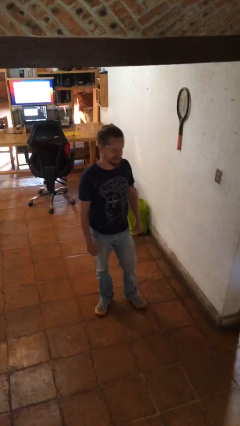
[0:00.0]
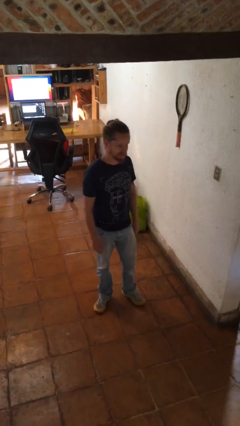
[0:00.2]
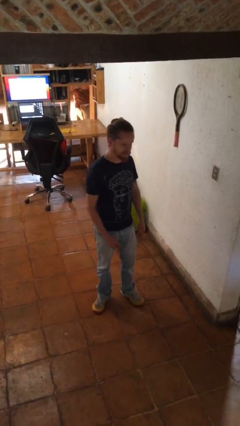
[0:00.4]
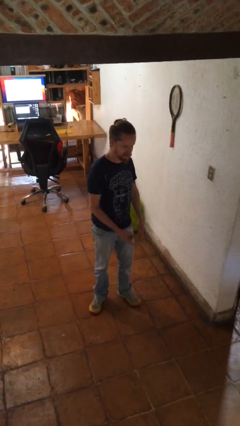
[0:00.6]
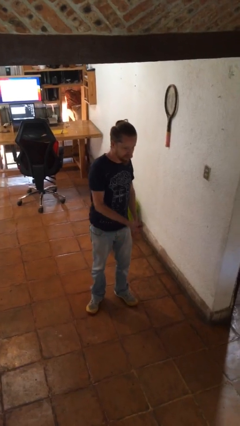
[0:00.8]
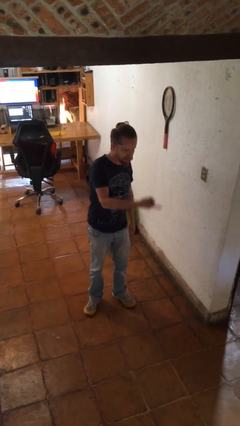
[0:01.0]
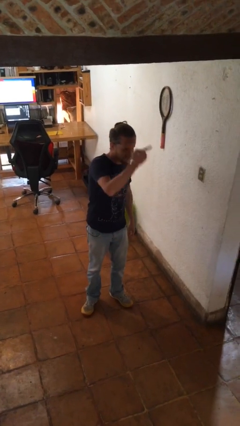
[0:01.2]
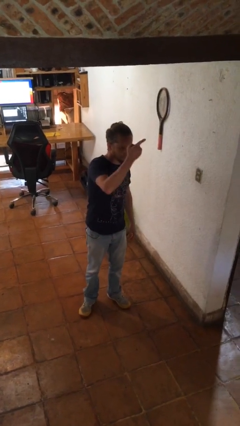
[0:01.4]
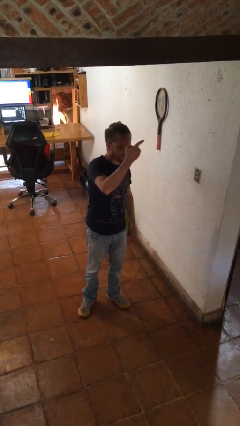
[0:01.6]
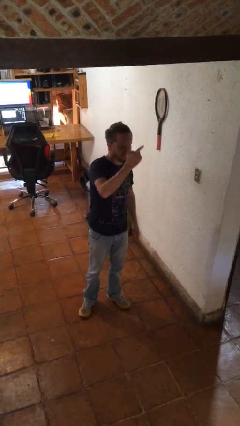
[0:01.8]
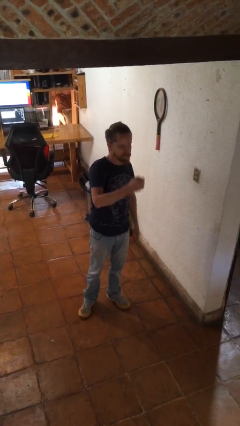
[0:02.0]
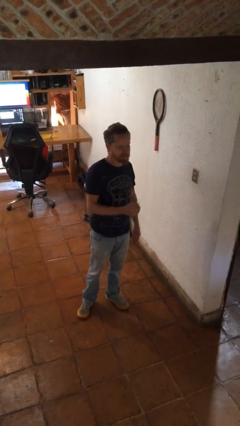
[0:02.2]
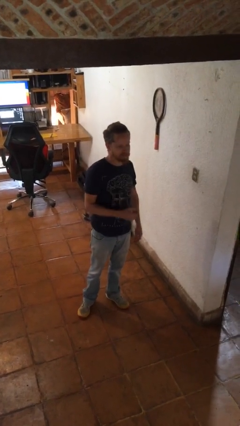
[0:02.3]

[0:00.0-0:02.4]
person gestures swipe up

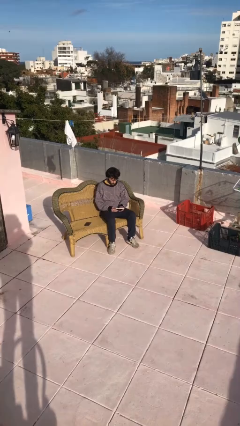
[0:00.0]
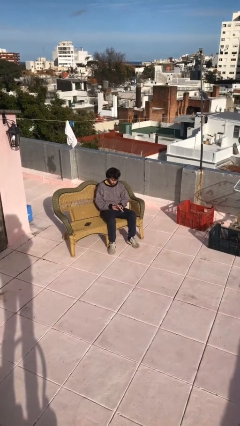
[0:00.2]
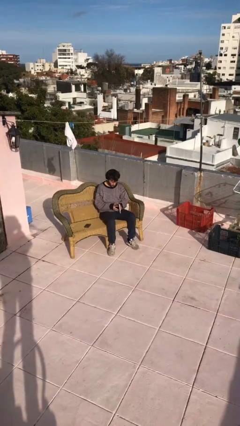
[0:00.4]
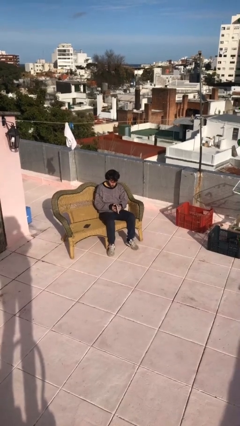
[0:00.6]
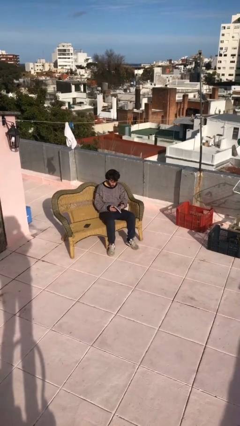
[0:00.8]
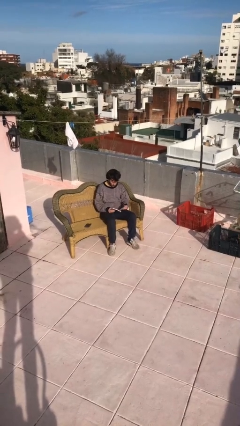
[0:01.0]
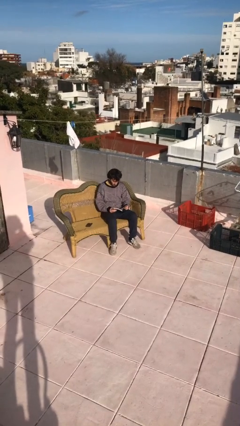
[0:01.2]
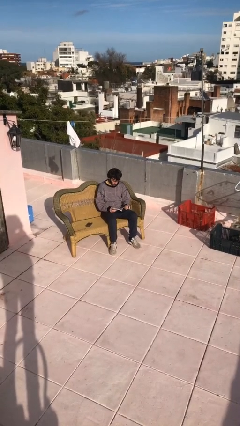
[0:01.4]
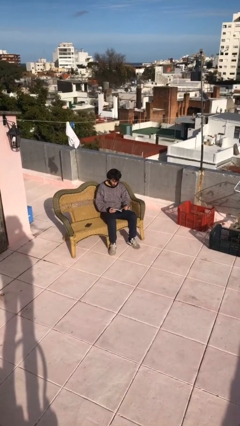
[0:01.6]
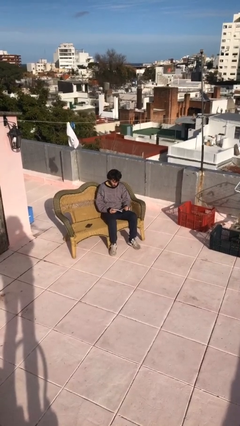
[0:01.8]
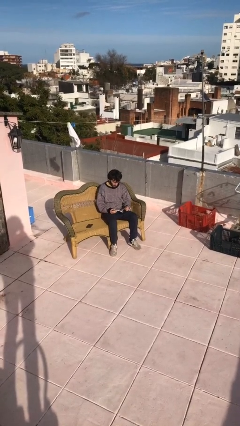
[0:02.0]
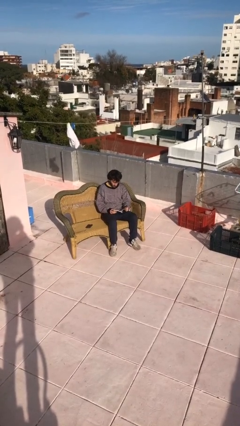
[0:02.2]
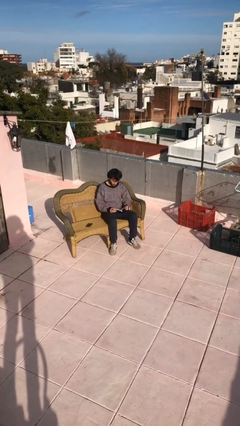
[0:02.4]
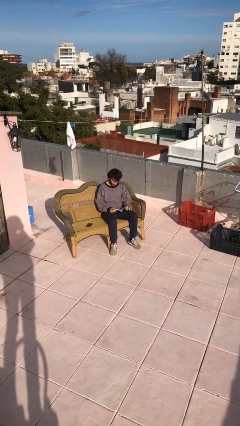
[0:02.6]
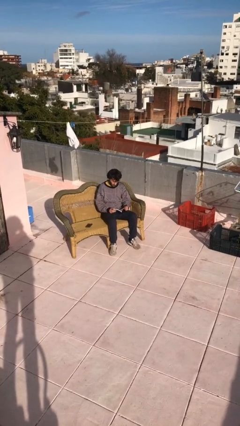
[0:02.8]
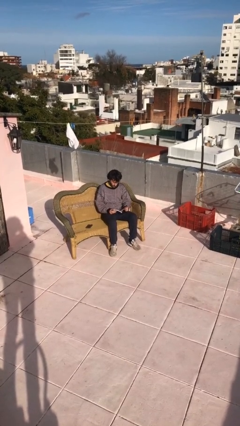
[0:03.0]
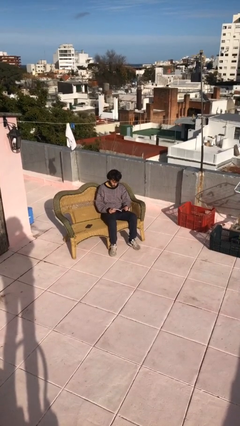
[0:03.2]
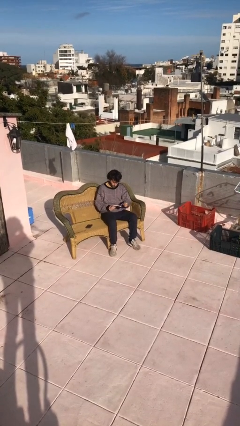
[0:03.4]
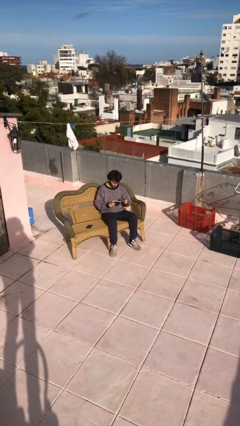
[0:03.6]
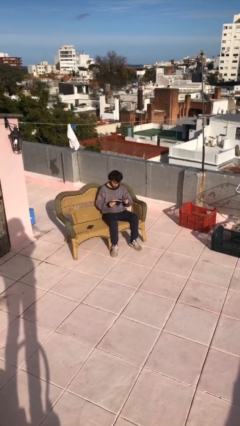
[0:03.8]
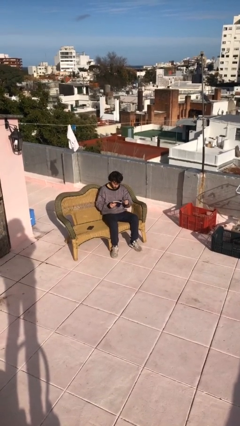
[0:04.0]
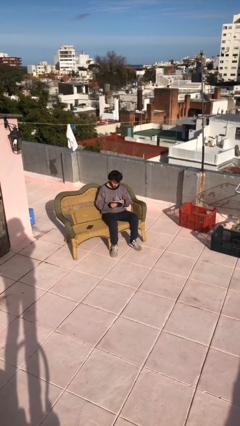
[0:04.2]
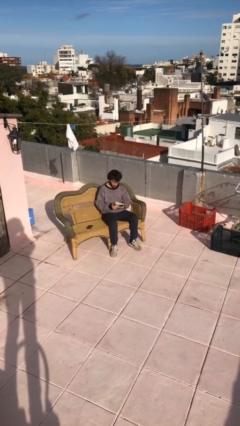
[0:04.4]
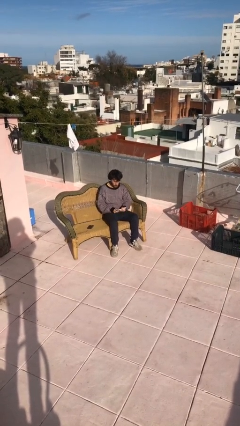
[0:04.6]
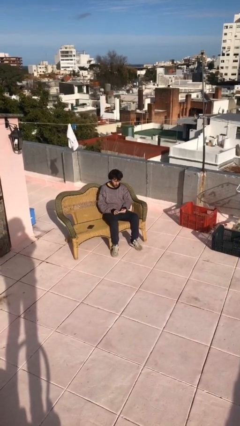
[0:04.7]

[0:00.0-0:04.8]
person reads book

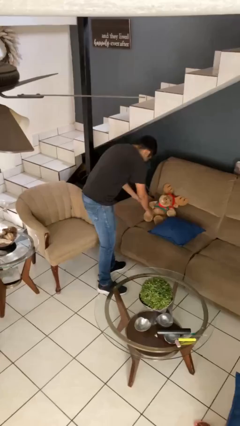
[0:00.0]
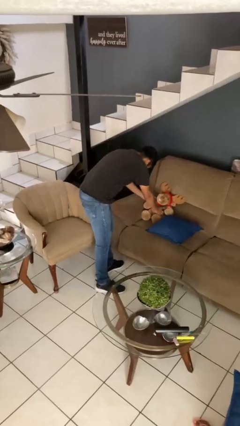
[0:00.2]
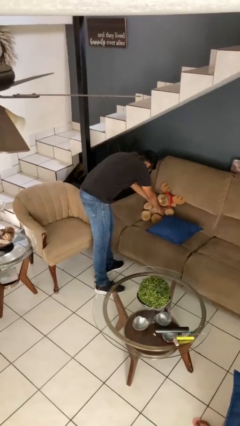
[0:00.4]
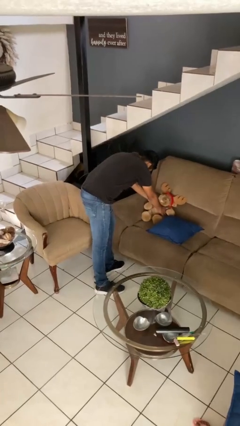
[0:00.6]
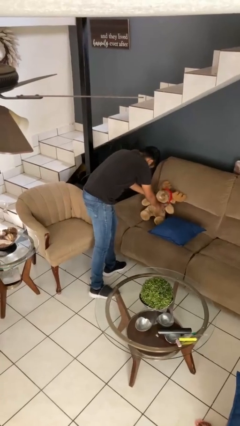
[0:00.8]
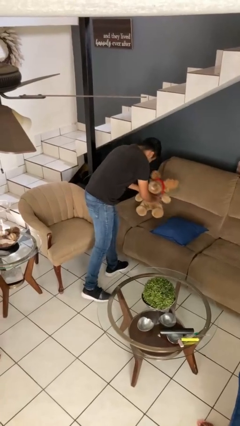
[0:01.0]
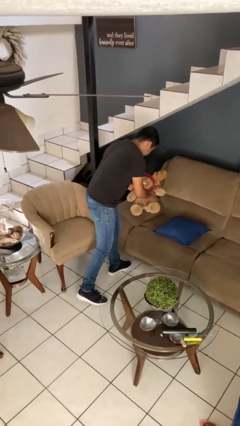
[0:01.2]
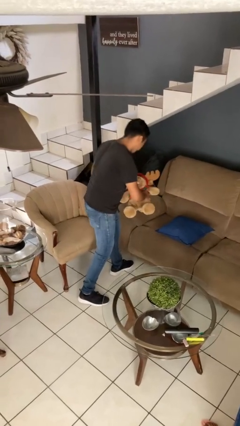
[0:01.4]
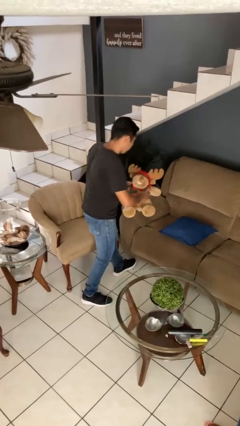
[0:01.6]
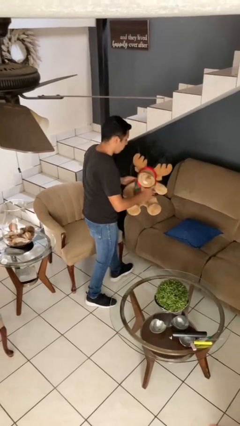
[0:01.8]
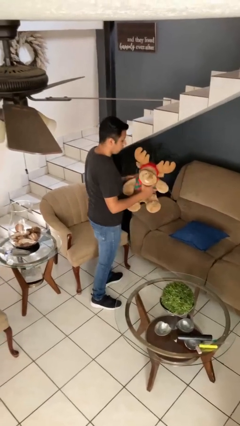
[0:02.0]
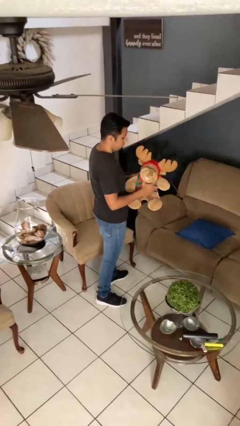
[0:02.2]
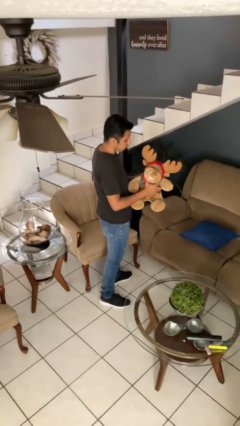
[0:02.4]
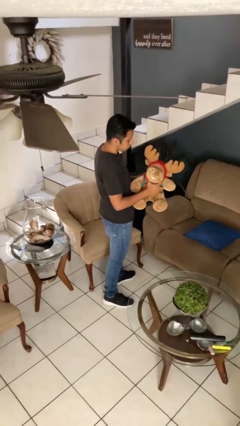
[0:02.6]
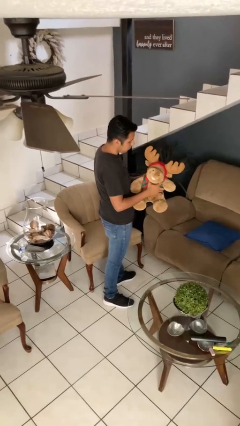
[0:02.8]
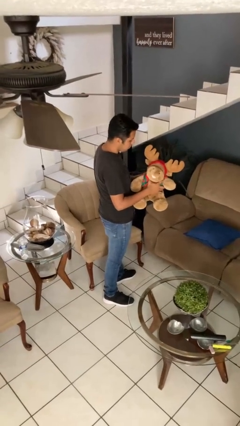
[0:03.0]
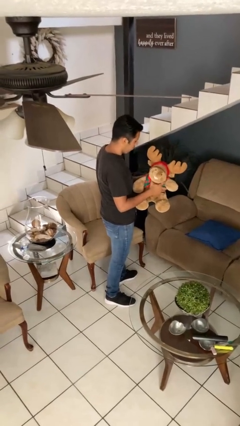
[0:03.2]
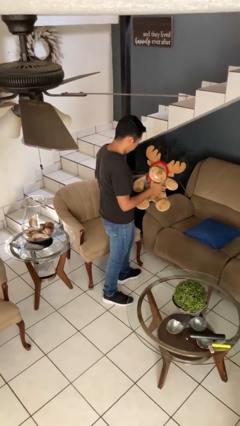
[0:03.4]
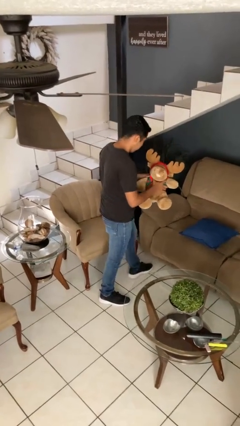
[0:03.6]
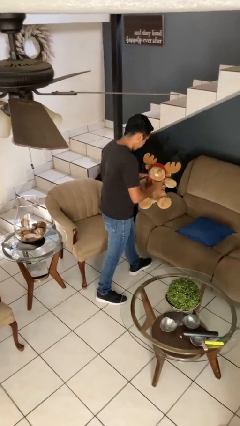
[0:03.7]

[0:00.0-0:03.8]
person picks up object from couch

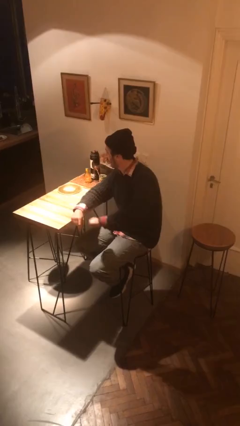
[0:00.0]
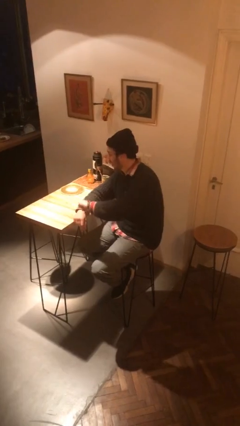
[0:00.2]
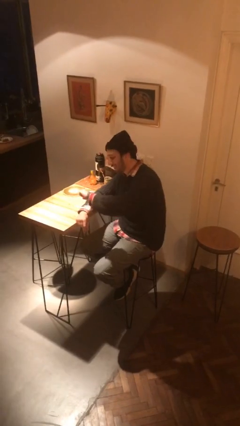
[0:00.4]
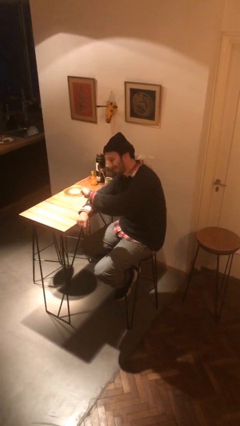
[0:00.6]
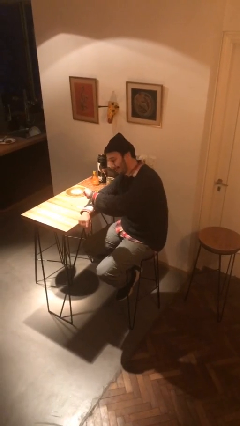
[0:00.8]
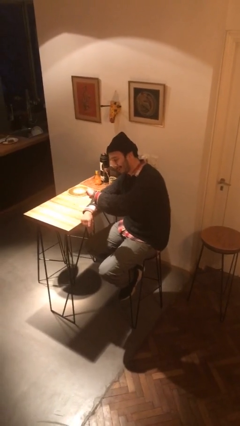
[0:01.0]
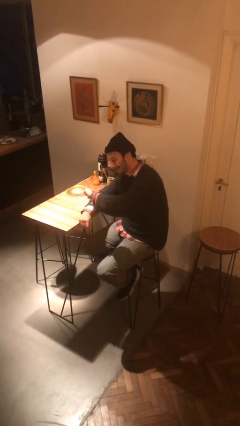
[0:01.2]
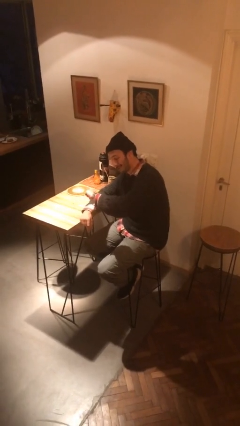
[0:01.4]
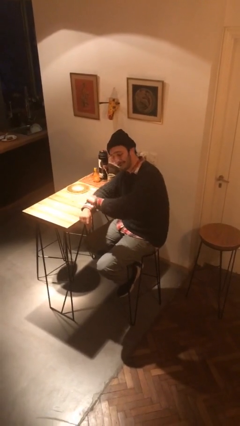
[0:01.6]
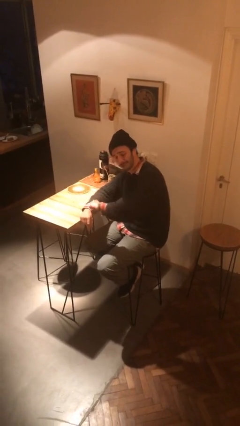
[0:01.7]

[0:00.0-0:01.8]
person looks at wristwatch

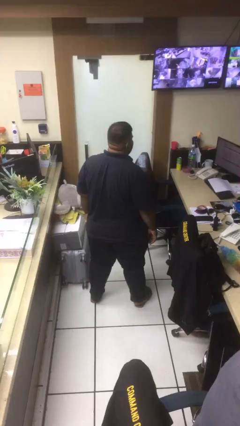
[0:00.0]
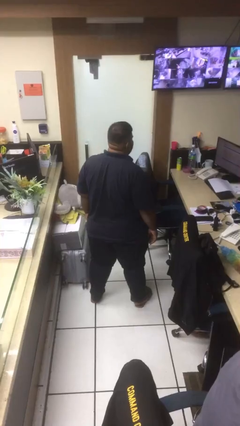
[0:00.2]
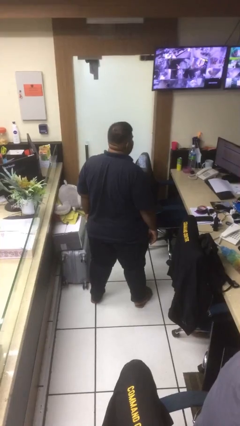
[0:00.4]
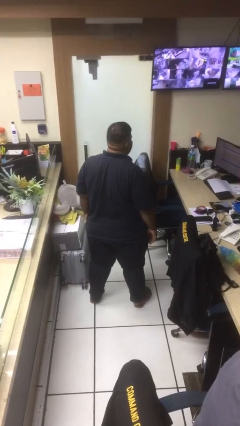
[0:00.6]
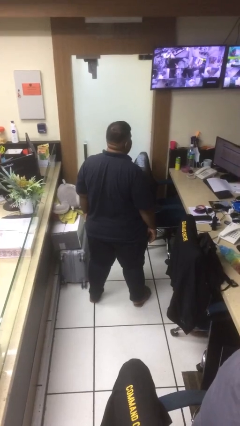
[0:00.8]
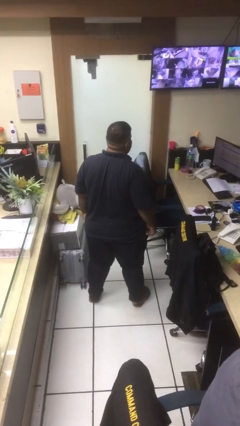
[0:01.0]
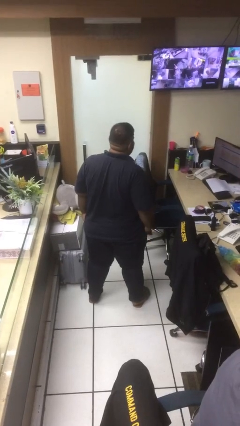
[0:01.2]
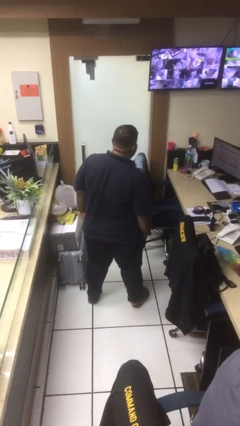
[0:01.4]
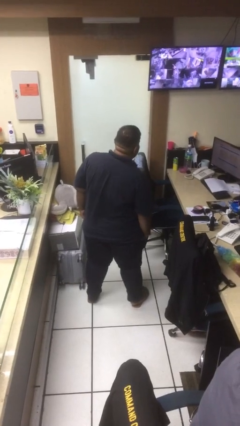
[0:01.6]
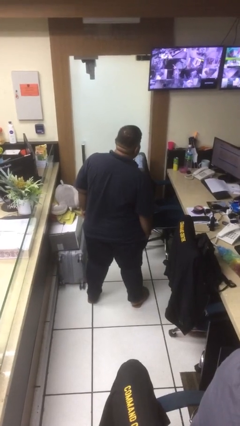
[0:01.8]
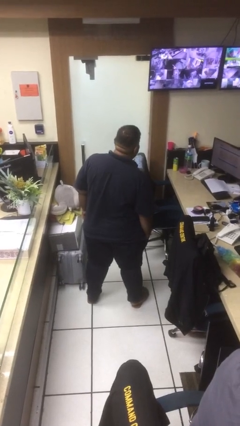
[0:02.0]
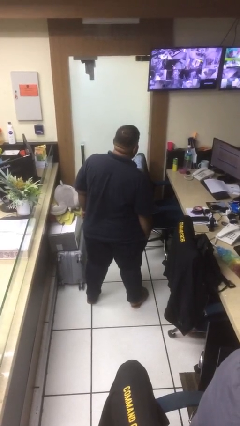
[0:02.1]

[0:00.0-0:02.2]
person puts hands in back pockets

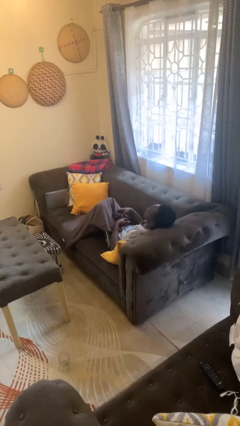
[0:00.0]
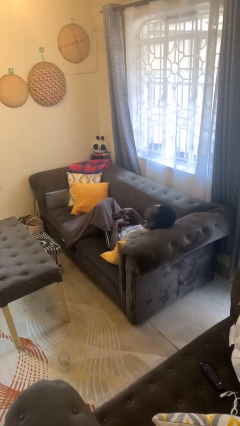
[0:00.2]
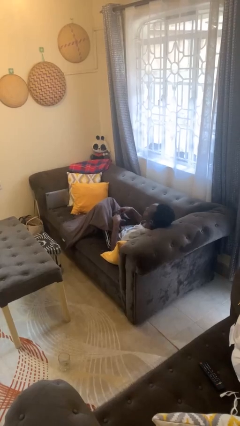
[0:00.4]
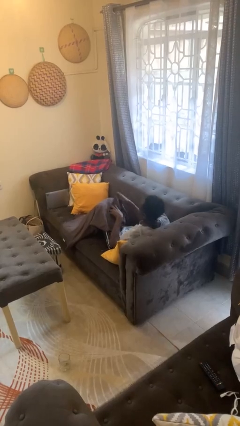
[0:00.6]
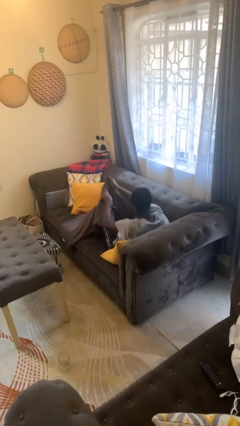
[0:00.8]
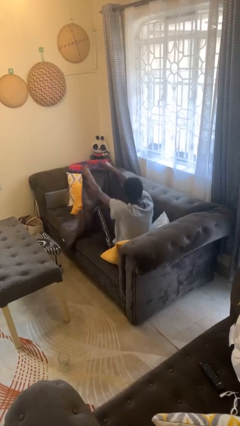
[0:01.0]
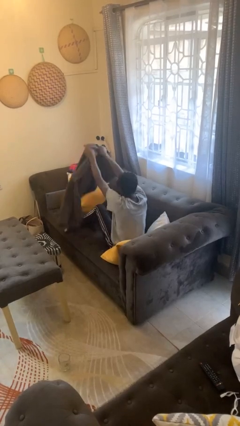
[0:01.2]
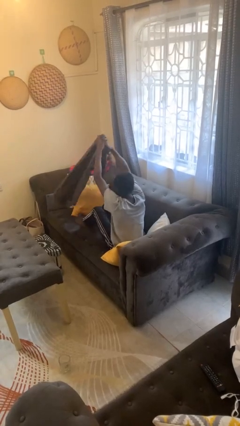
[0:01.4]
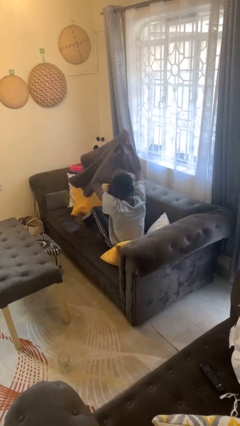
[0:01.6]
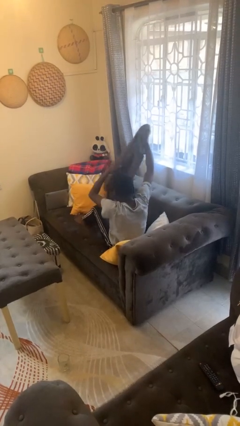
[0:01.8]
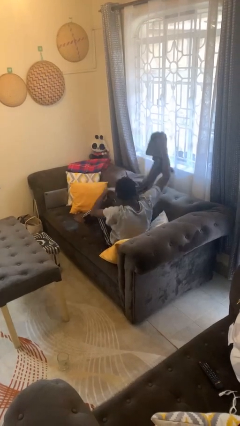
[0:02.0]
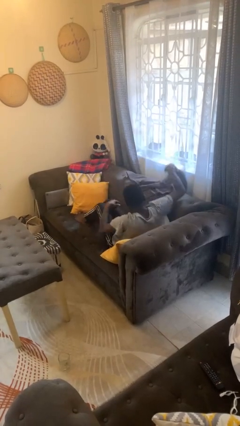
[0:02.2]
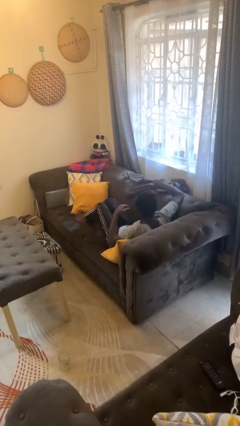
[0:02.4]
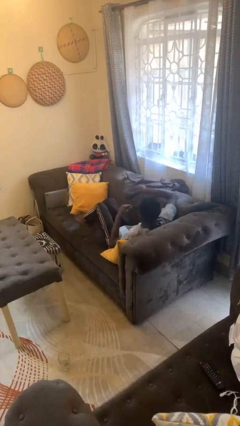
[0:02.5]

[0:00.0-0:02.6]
person uncovers with blanket
